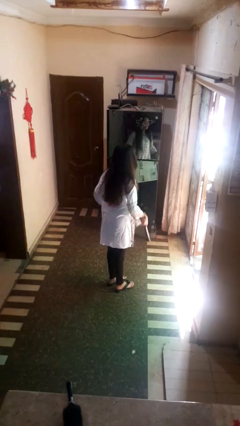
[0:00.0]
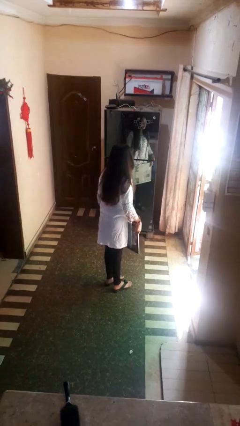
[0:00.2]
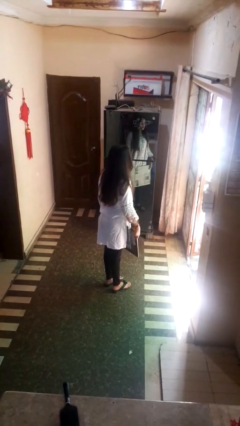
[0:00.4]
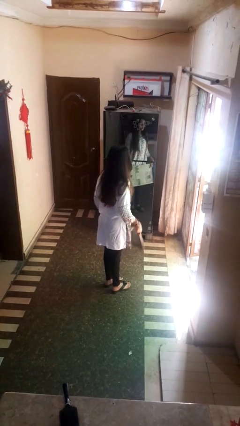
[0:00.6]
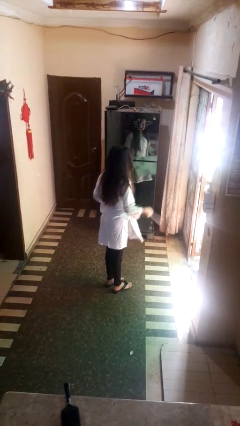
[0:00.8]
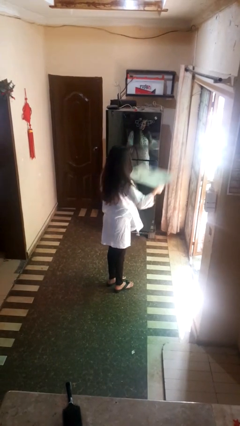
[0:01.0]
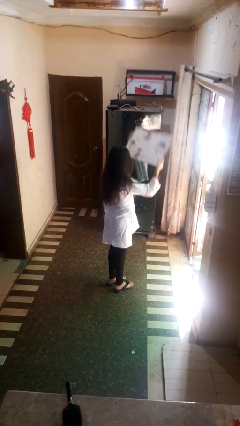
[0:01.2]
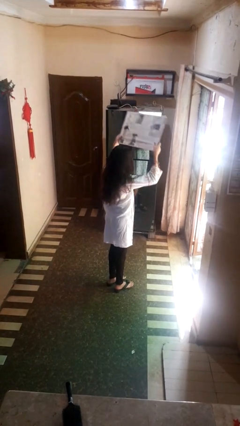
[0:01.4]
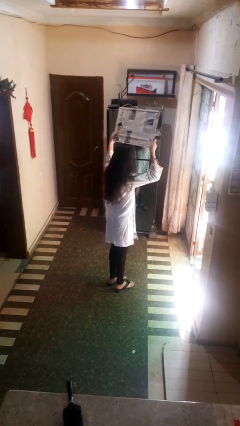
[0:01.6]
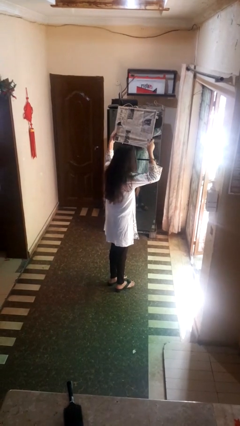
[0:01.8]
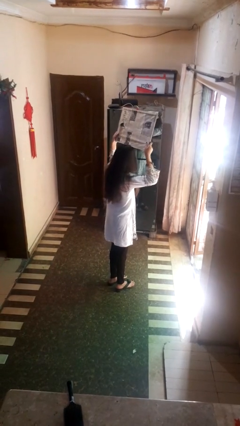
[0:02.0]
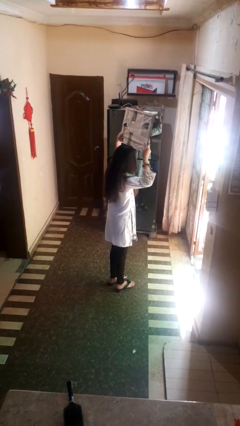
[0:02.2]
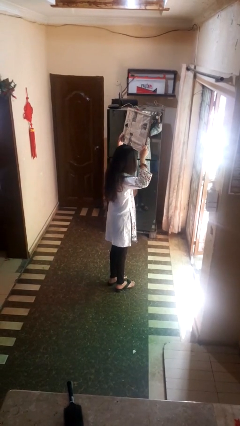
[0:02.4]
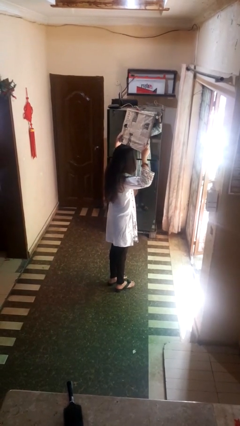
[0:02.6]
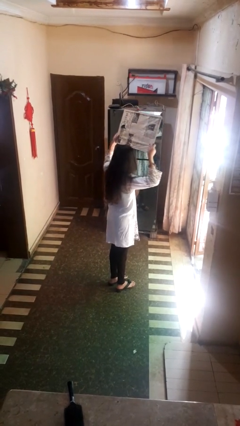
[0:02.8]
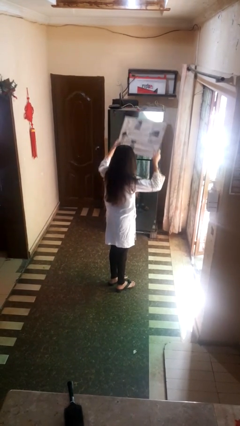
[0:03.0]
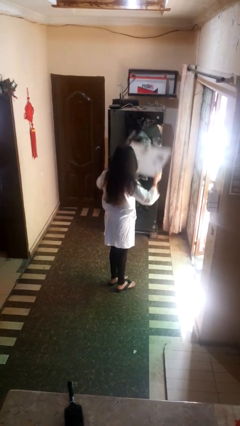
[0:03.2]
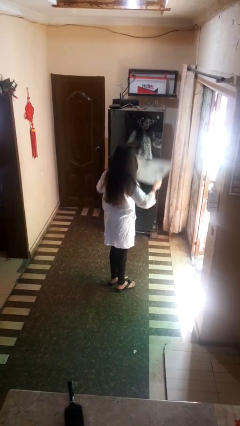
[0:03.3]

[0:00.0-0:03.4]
person holds object above head

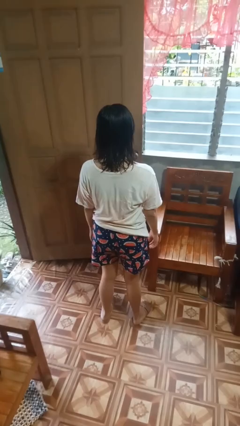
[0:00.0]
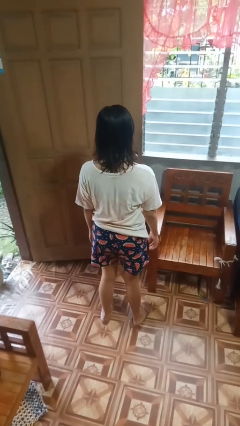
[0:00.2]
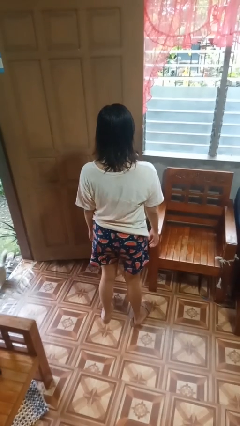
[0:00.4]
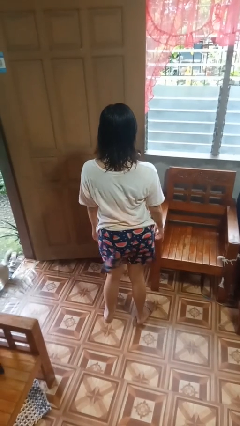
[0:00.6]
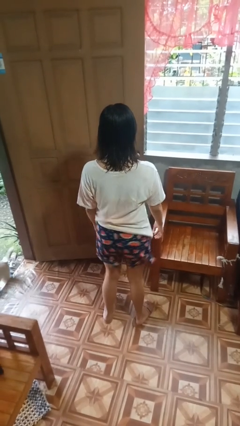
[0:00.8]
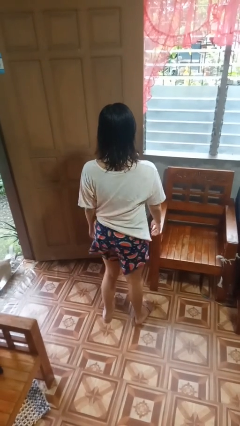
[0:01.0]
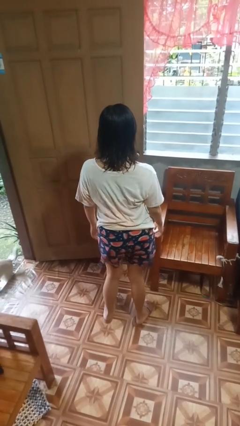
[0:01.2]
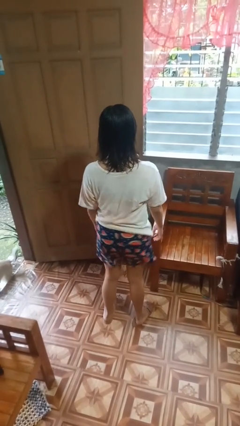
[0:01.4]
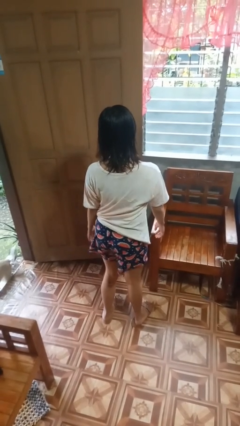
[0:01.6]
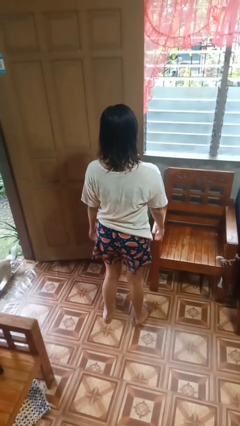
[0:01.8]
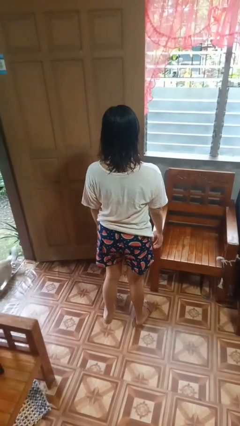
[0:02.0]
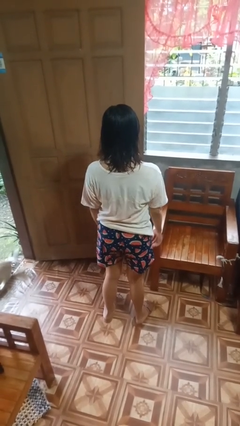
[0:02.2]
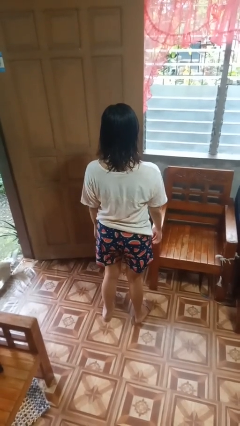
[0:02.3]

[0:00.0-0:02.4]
person wiggles hips

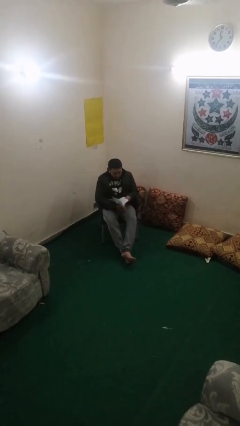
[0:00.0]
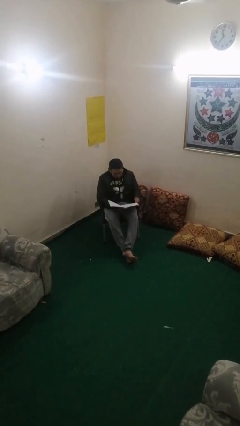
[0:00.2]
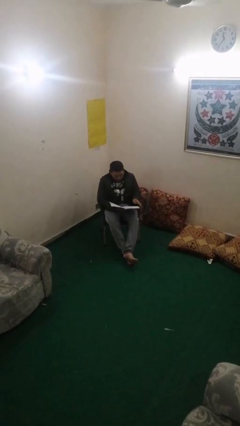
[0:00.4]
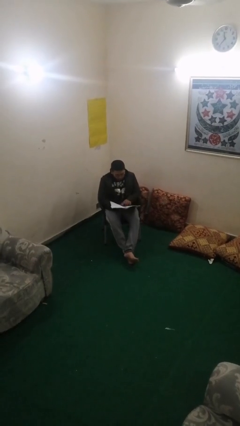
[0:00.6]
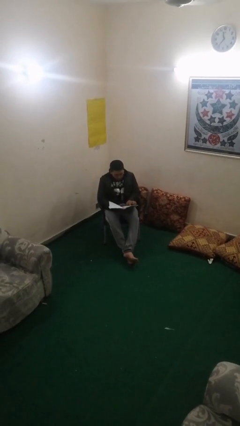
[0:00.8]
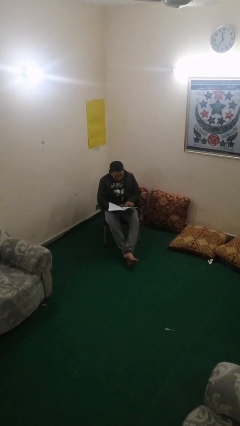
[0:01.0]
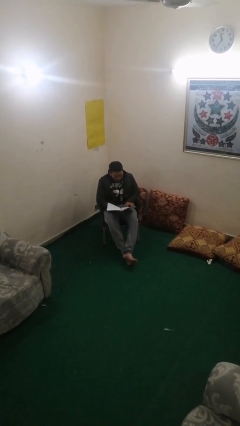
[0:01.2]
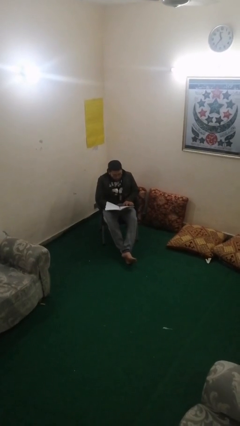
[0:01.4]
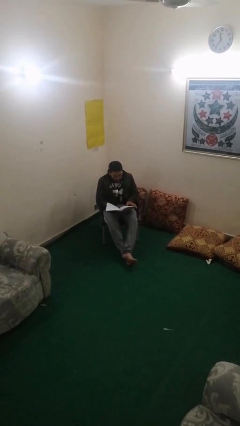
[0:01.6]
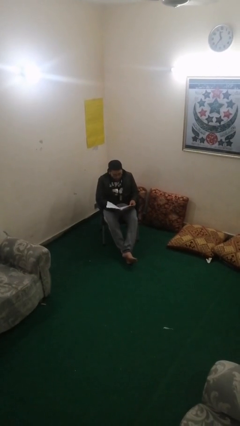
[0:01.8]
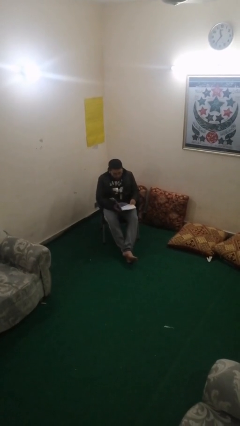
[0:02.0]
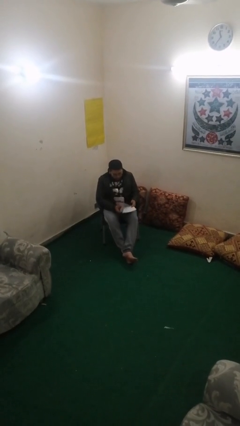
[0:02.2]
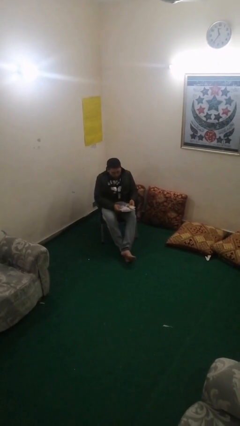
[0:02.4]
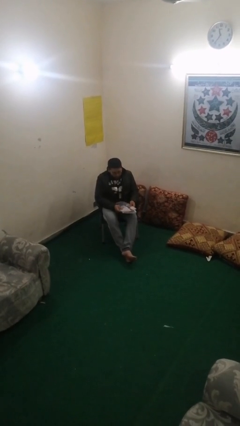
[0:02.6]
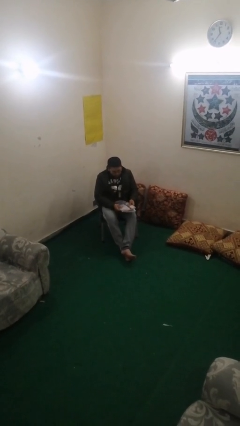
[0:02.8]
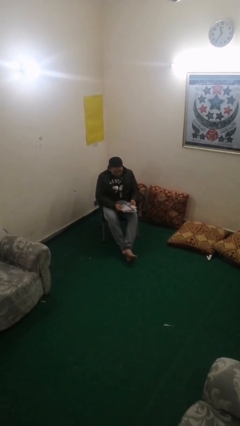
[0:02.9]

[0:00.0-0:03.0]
person reads document

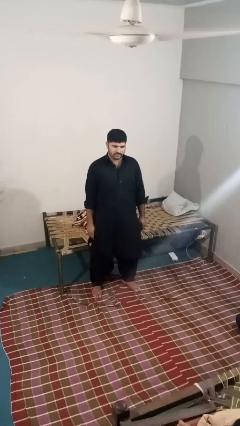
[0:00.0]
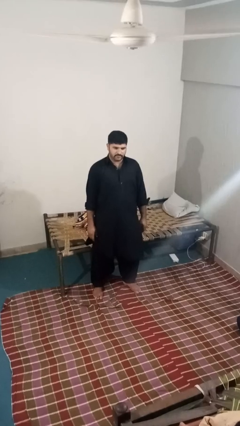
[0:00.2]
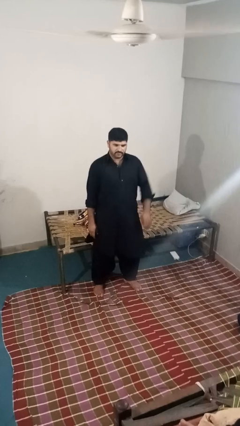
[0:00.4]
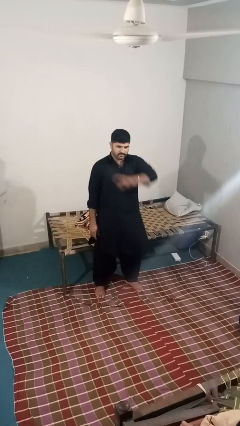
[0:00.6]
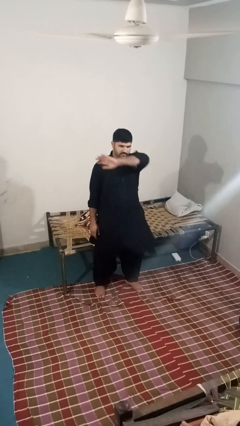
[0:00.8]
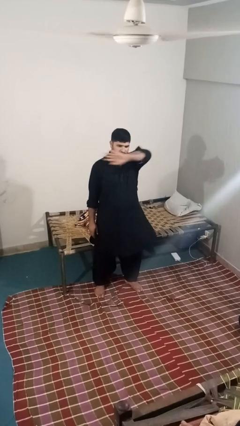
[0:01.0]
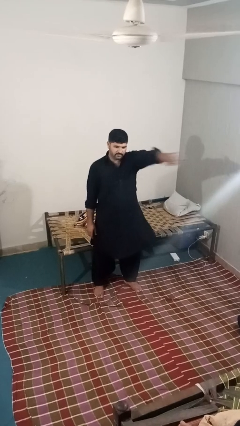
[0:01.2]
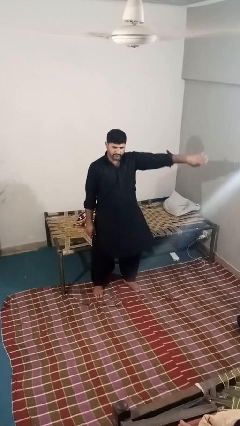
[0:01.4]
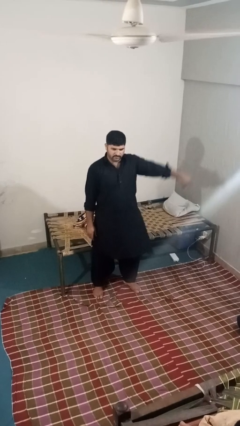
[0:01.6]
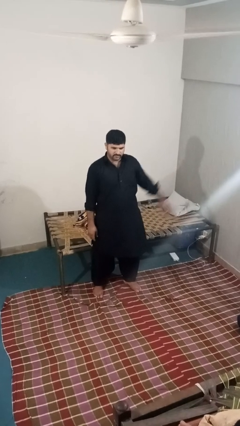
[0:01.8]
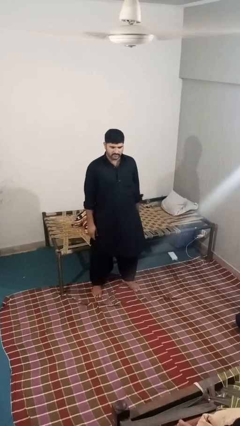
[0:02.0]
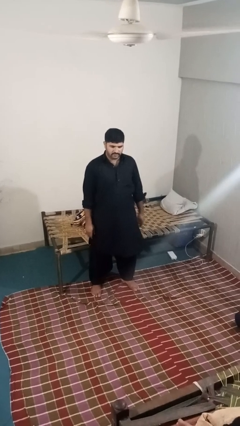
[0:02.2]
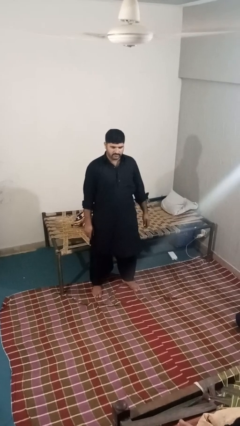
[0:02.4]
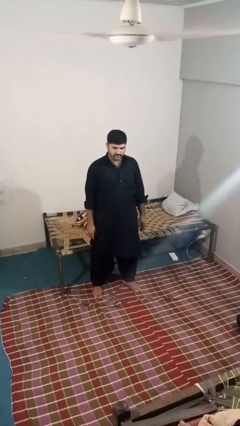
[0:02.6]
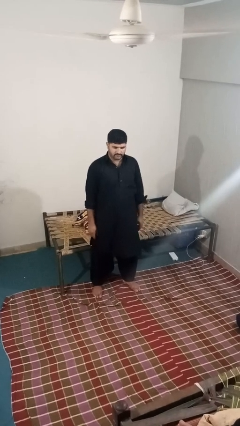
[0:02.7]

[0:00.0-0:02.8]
person gestures swipe left

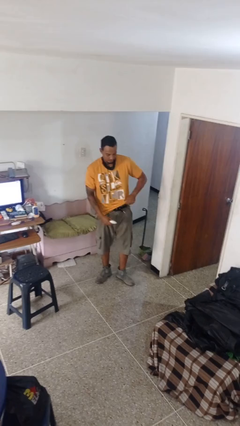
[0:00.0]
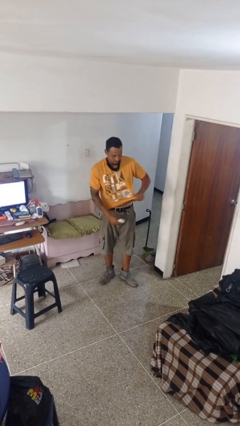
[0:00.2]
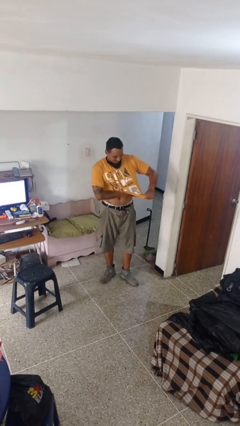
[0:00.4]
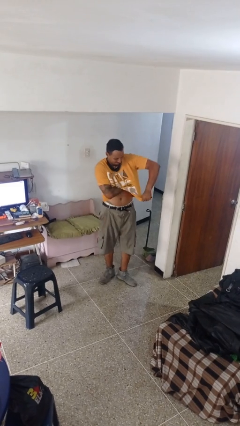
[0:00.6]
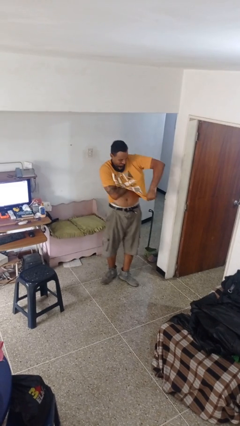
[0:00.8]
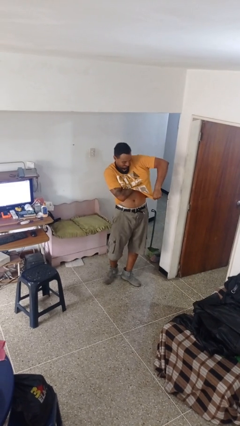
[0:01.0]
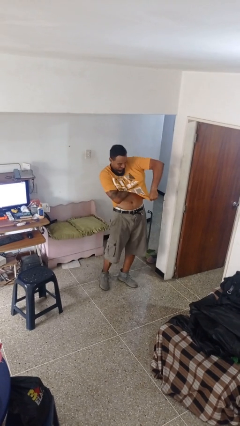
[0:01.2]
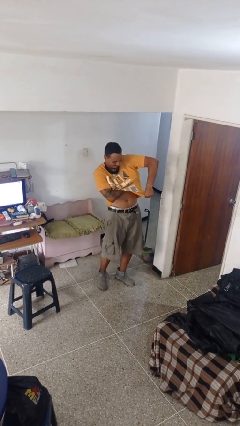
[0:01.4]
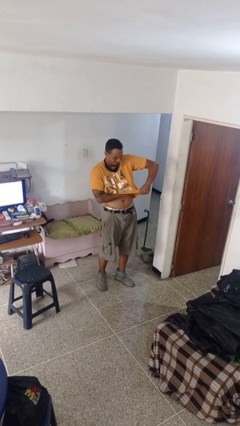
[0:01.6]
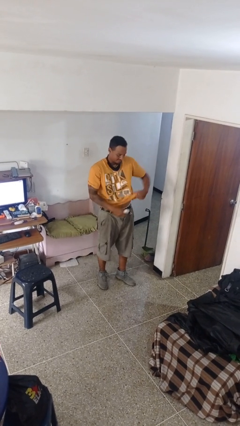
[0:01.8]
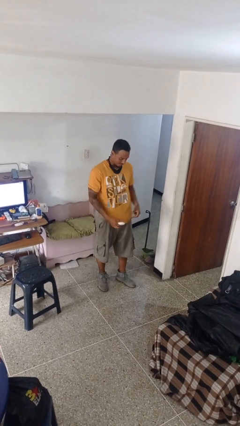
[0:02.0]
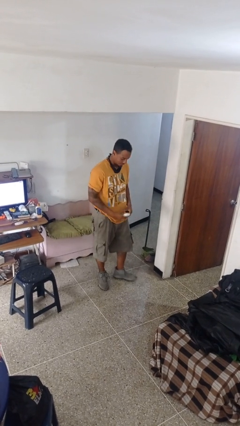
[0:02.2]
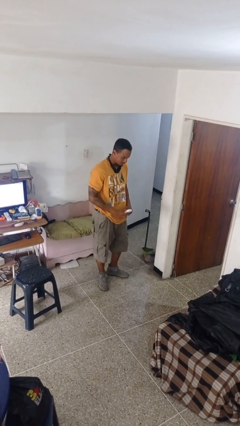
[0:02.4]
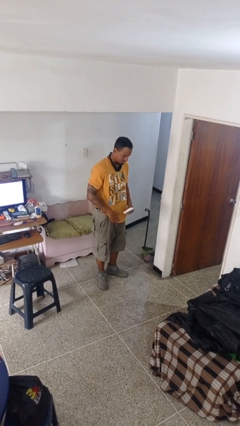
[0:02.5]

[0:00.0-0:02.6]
person applies deodorant

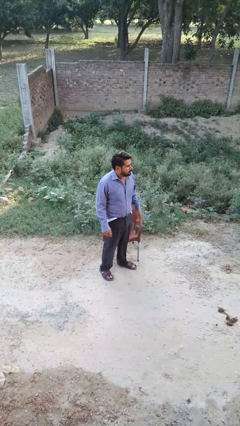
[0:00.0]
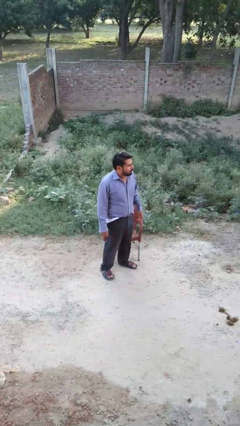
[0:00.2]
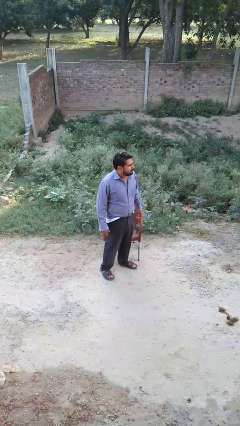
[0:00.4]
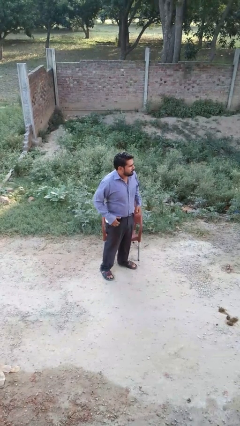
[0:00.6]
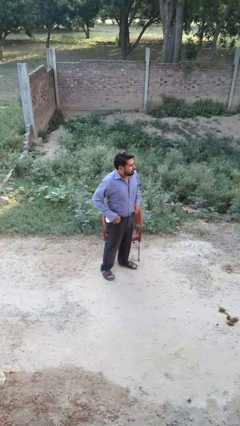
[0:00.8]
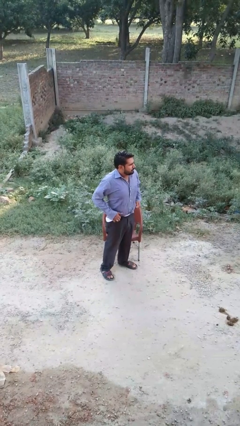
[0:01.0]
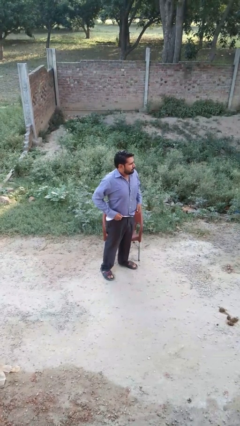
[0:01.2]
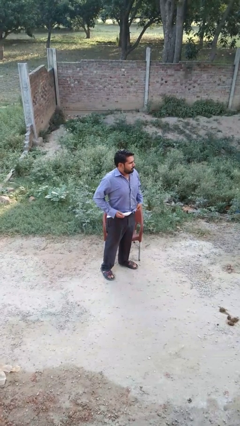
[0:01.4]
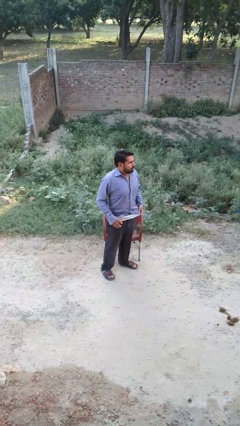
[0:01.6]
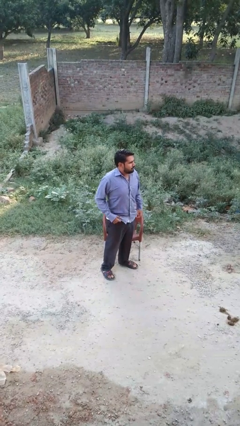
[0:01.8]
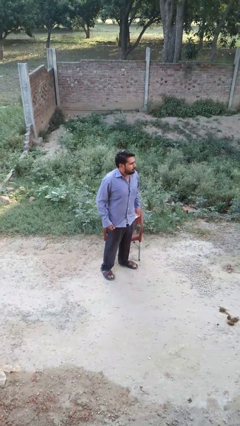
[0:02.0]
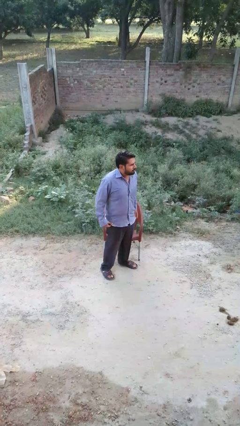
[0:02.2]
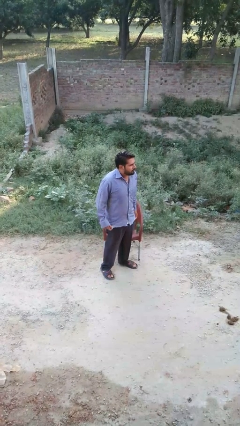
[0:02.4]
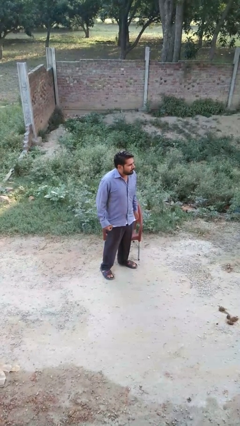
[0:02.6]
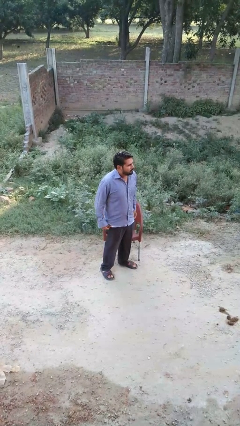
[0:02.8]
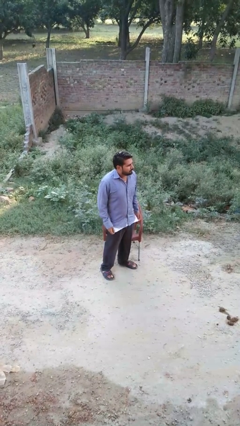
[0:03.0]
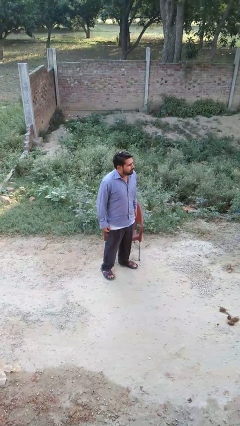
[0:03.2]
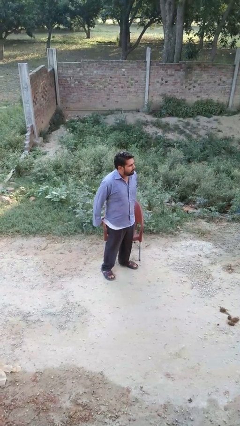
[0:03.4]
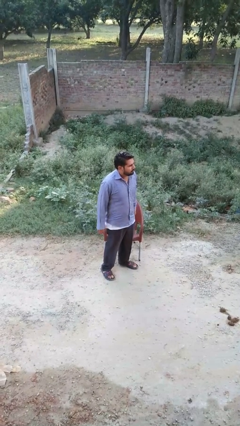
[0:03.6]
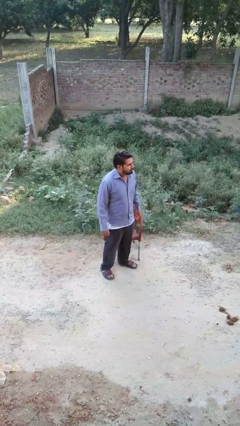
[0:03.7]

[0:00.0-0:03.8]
person untucks shirt
